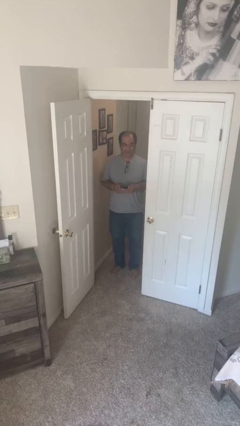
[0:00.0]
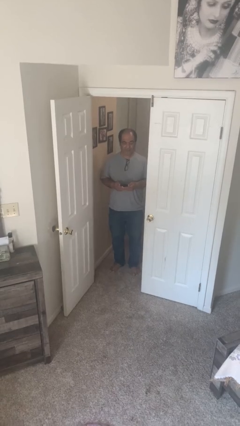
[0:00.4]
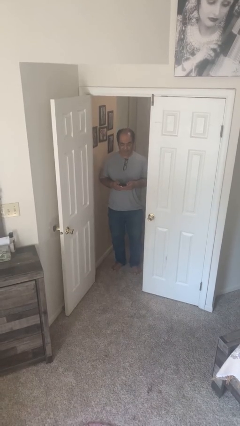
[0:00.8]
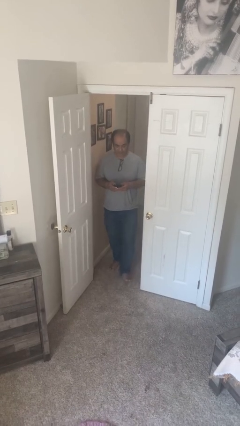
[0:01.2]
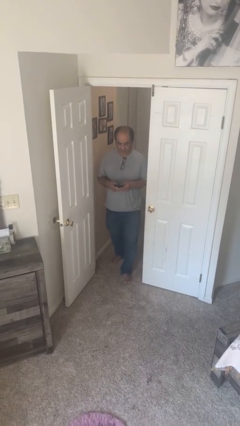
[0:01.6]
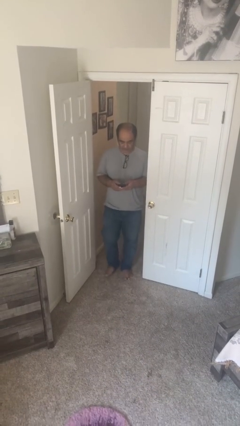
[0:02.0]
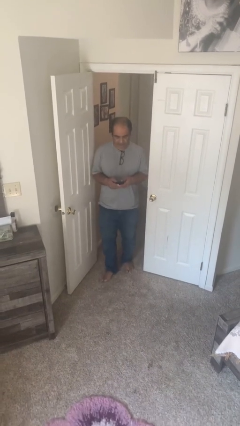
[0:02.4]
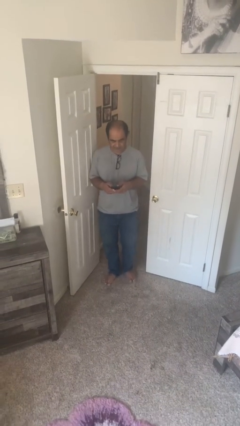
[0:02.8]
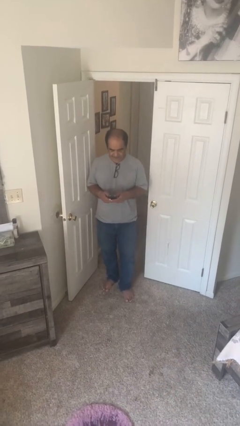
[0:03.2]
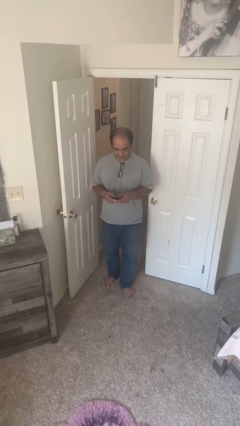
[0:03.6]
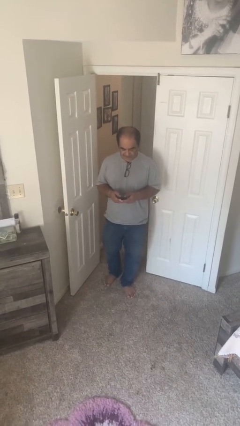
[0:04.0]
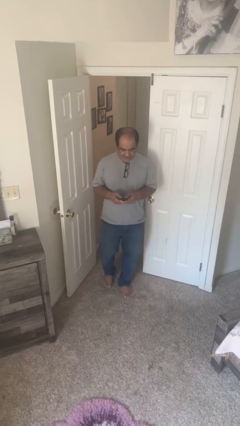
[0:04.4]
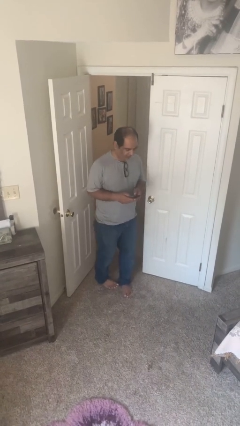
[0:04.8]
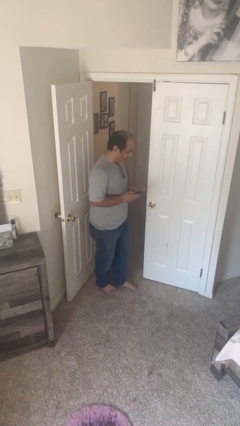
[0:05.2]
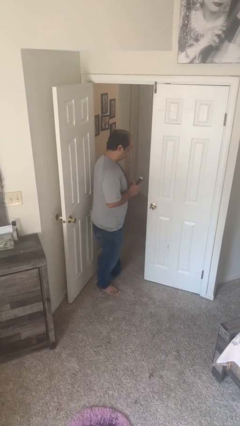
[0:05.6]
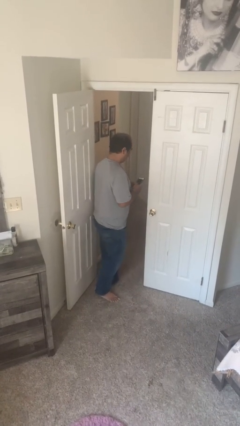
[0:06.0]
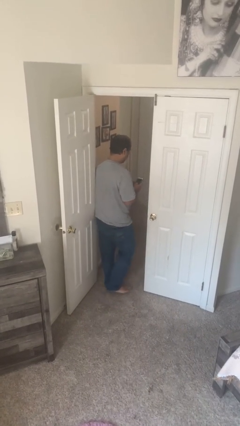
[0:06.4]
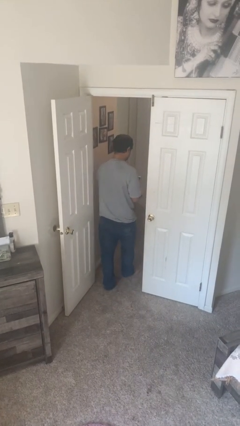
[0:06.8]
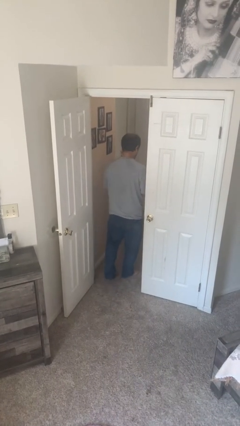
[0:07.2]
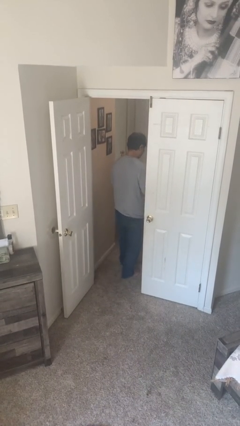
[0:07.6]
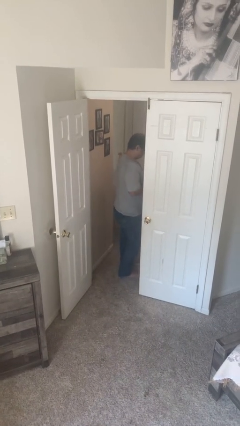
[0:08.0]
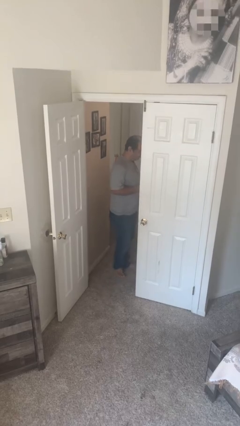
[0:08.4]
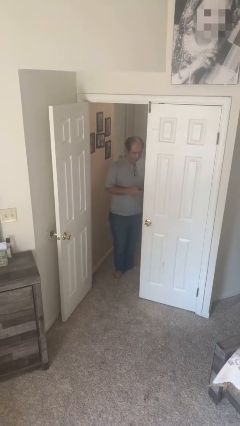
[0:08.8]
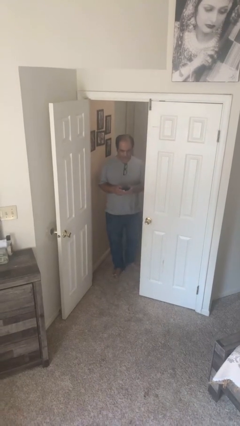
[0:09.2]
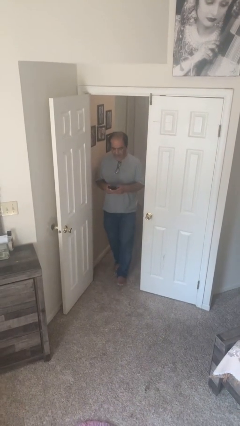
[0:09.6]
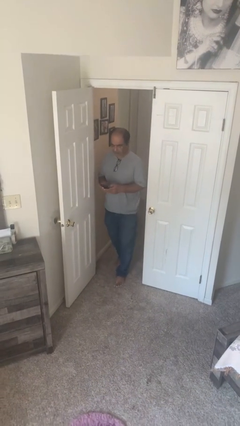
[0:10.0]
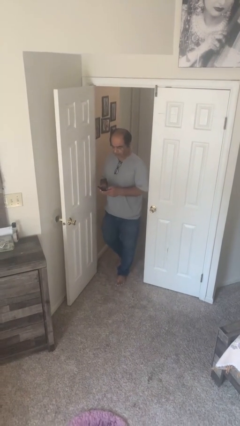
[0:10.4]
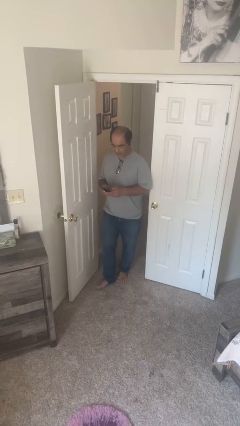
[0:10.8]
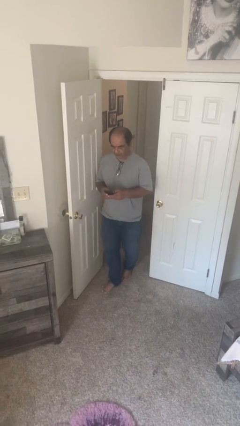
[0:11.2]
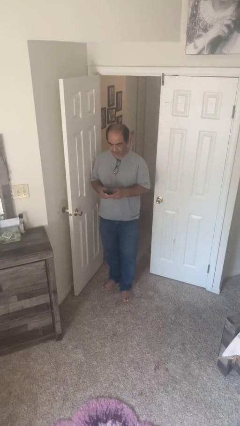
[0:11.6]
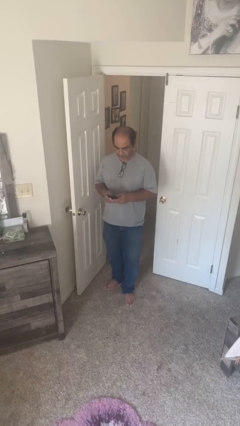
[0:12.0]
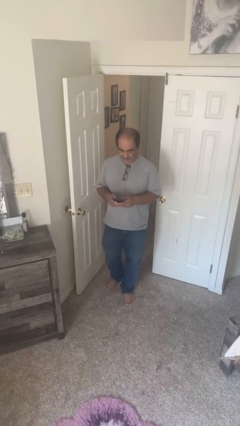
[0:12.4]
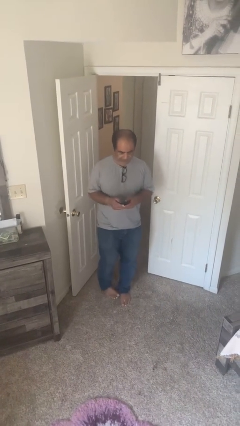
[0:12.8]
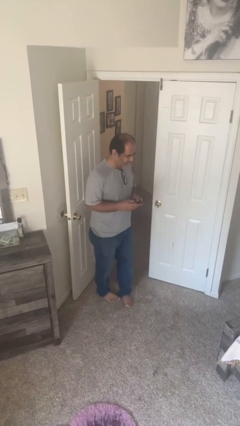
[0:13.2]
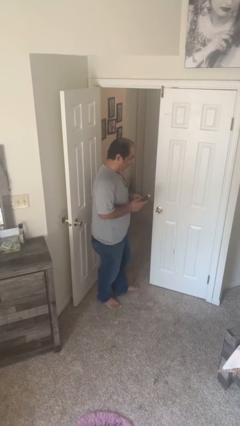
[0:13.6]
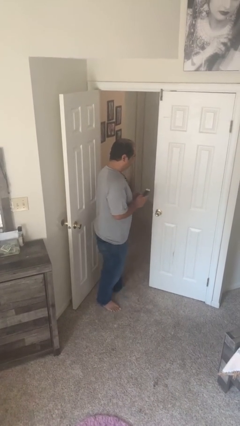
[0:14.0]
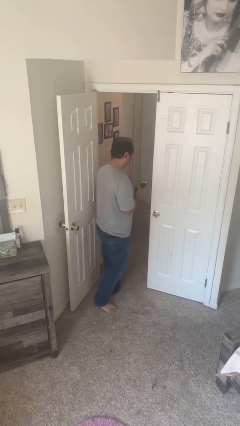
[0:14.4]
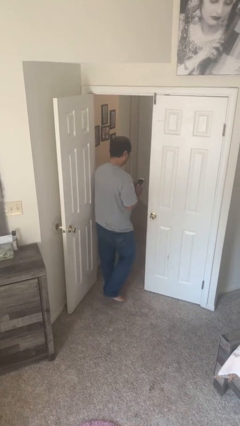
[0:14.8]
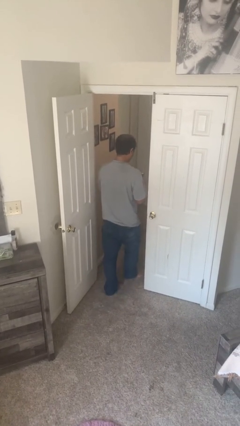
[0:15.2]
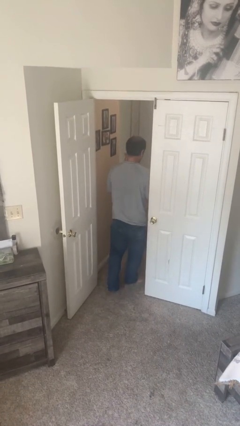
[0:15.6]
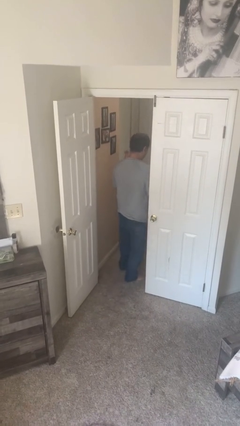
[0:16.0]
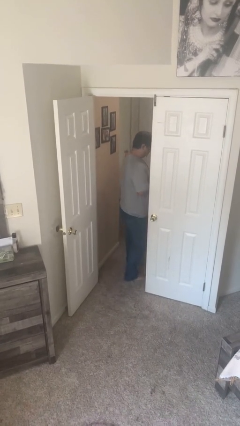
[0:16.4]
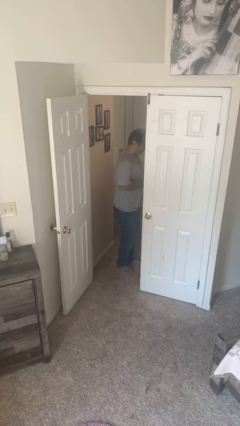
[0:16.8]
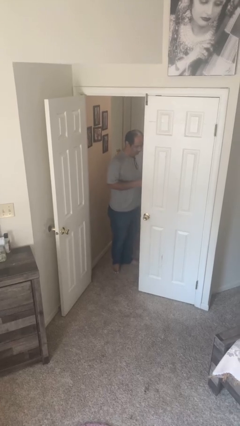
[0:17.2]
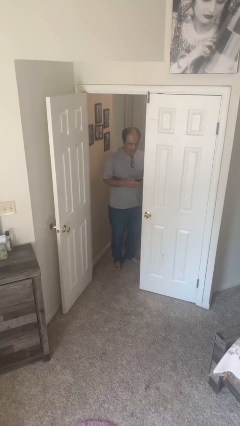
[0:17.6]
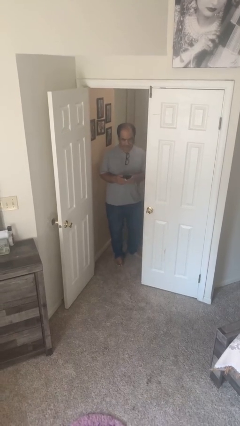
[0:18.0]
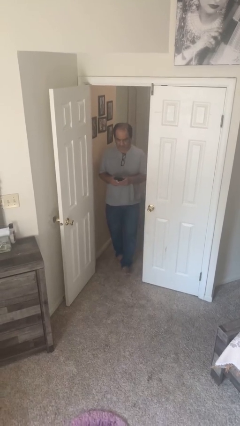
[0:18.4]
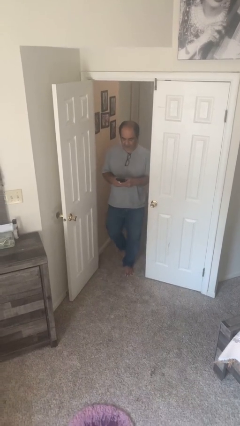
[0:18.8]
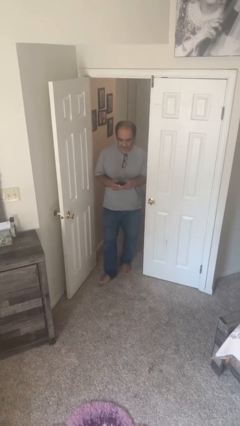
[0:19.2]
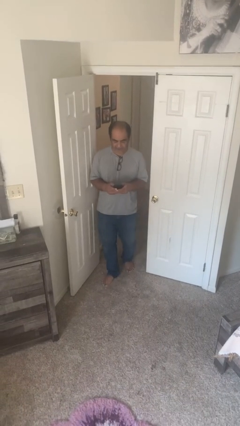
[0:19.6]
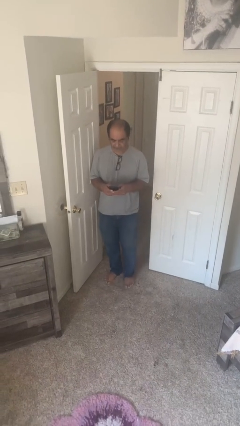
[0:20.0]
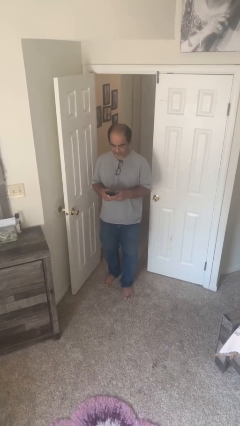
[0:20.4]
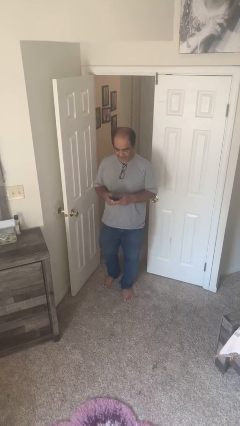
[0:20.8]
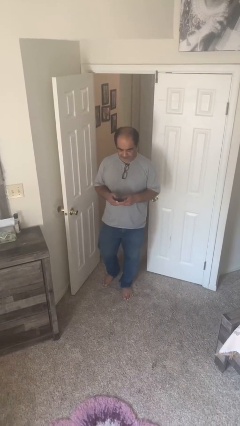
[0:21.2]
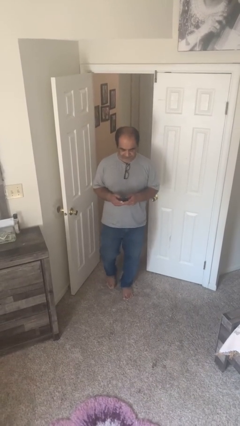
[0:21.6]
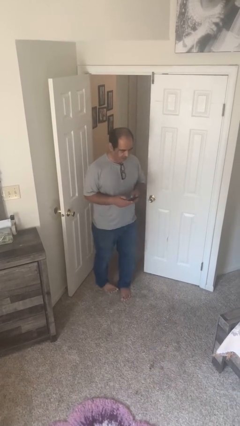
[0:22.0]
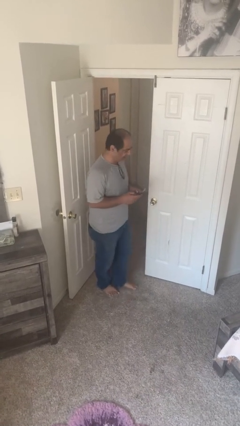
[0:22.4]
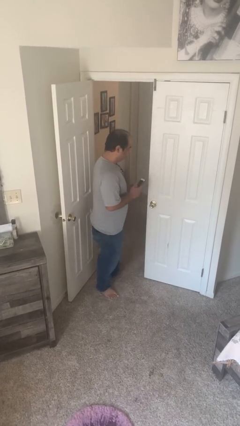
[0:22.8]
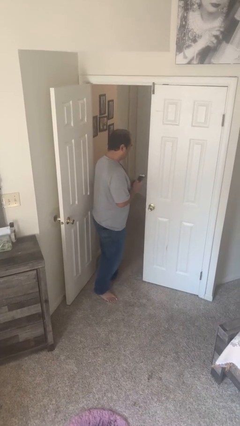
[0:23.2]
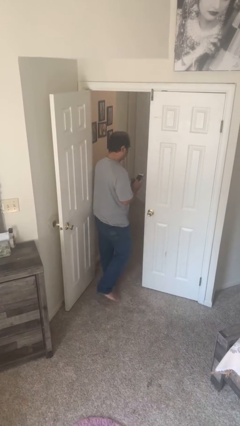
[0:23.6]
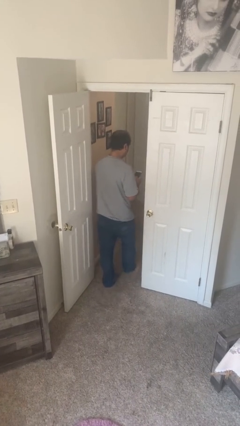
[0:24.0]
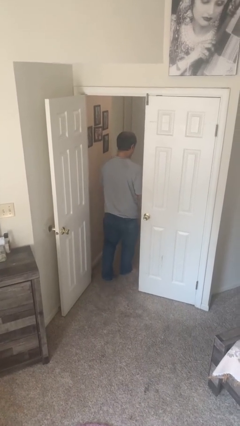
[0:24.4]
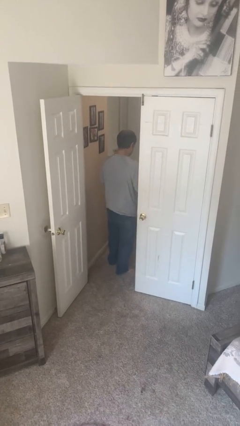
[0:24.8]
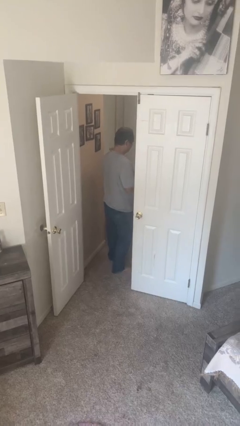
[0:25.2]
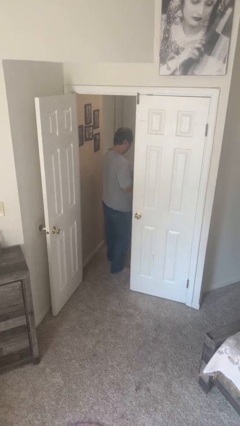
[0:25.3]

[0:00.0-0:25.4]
person texts on phone

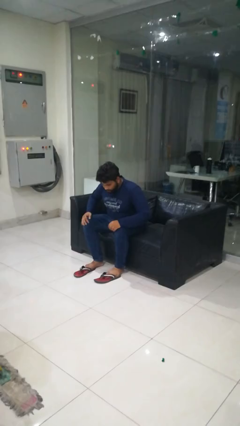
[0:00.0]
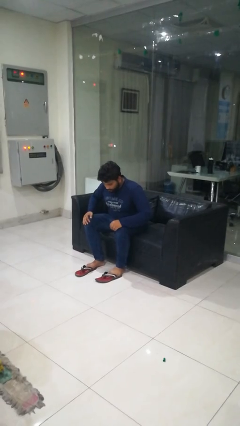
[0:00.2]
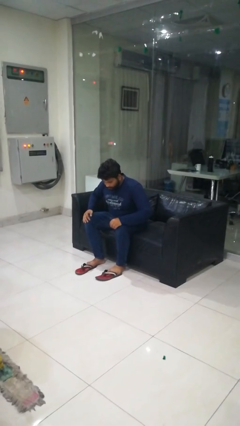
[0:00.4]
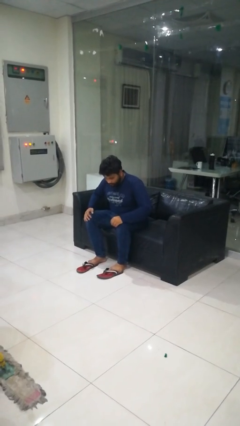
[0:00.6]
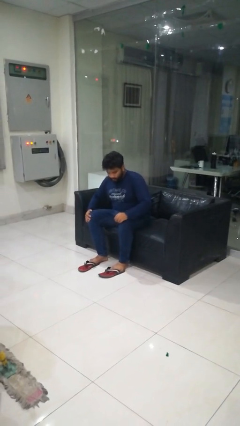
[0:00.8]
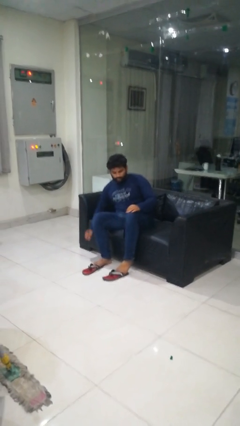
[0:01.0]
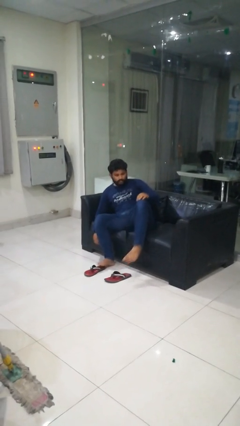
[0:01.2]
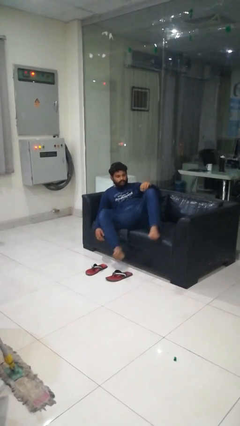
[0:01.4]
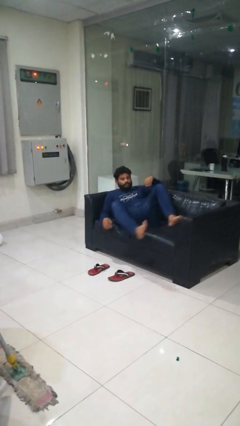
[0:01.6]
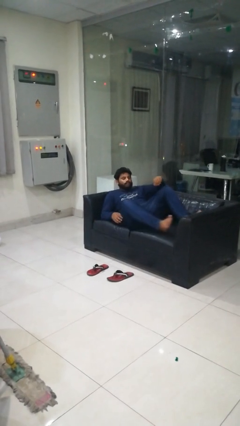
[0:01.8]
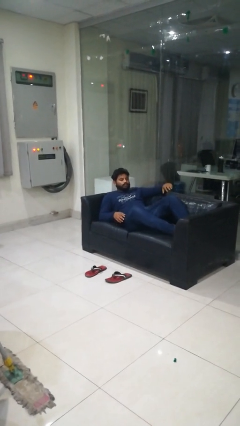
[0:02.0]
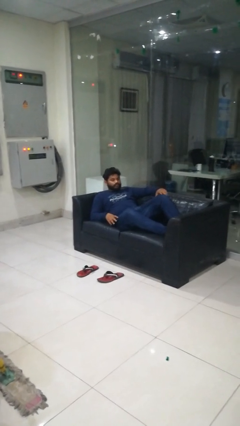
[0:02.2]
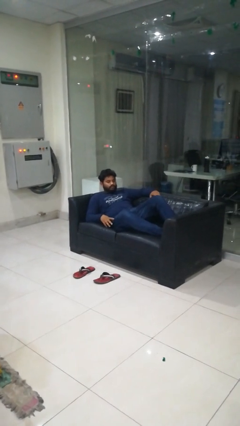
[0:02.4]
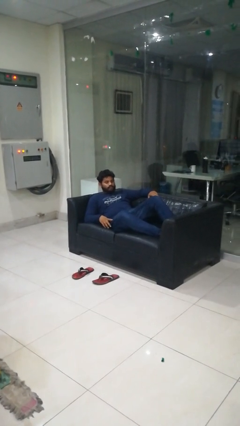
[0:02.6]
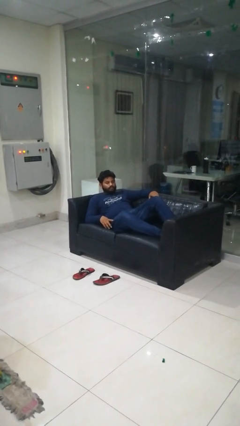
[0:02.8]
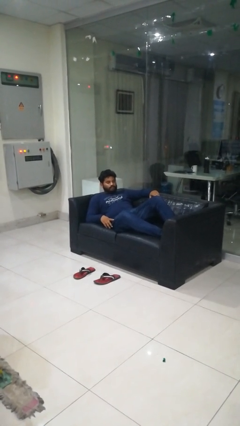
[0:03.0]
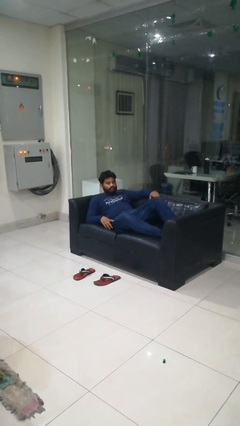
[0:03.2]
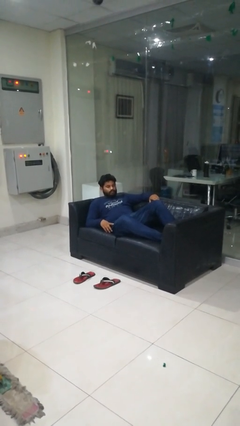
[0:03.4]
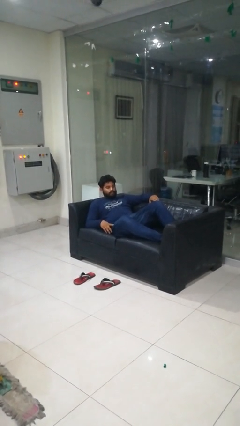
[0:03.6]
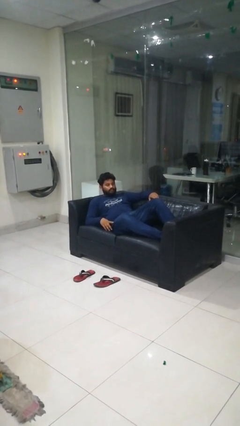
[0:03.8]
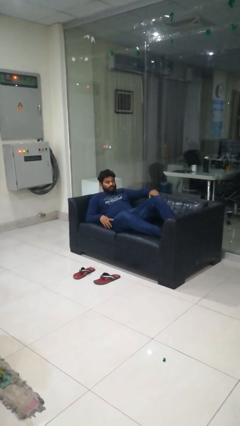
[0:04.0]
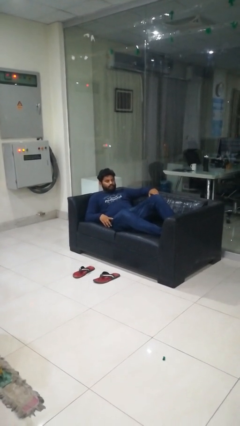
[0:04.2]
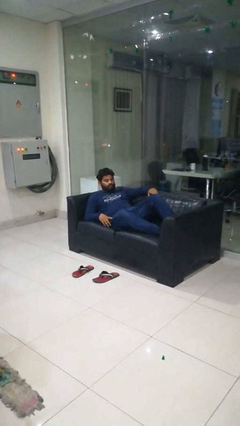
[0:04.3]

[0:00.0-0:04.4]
person lies down on couch

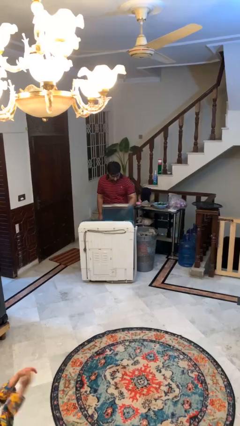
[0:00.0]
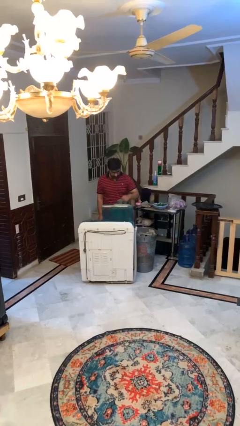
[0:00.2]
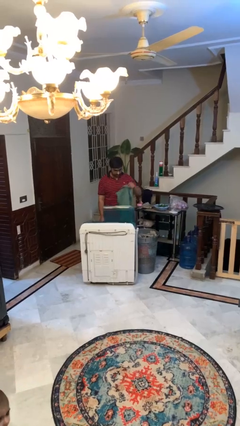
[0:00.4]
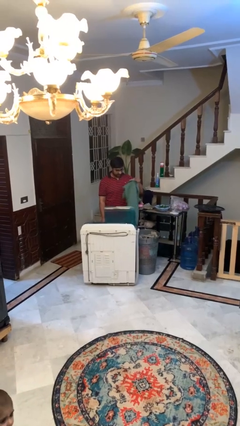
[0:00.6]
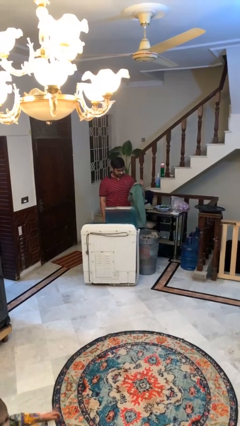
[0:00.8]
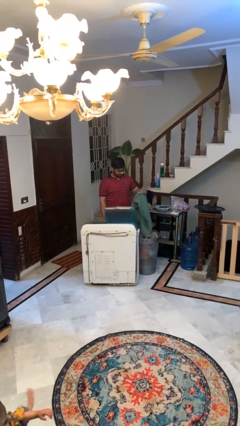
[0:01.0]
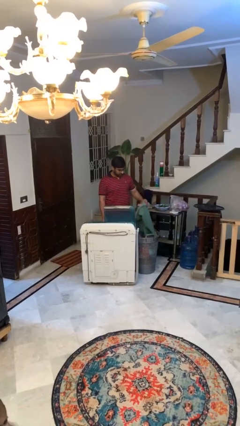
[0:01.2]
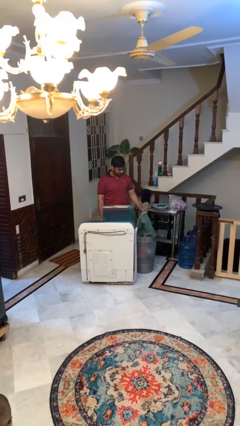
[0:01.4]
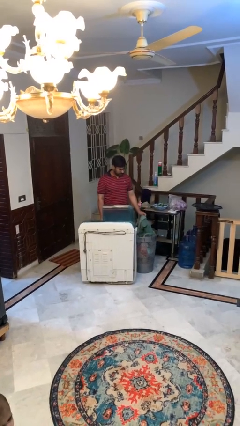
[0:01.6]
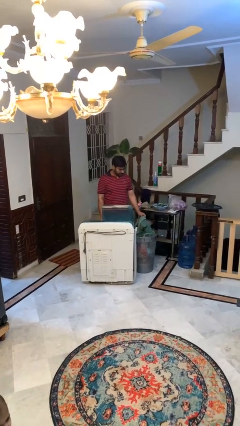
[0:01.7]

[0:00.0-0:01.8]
person unloads clotheswasher
